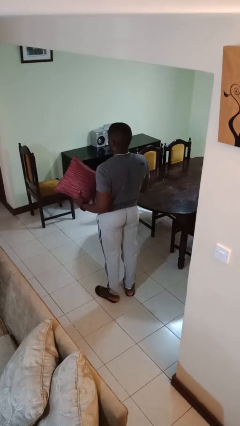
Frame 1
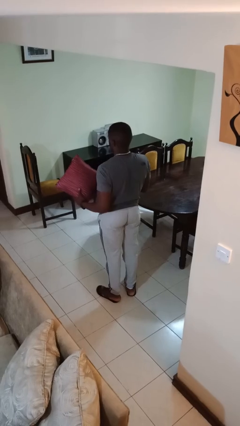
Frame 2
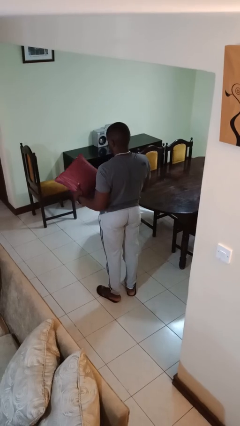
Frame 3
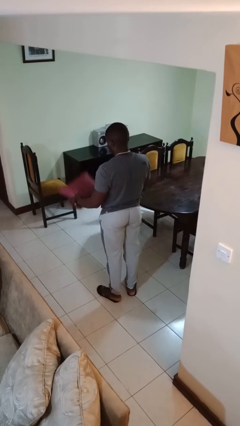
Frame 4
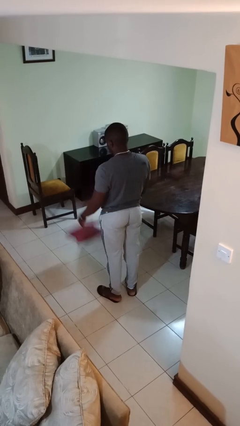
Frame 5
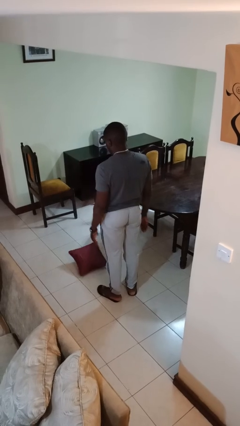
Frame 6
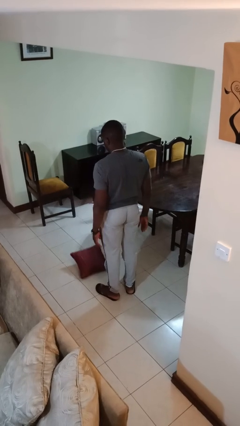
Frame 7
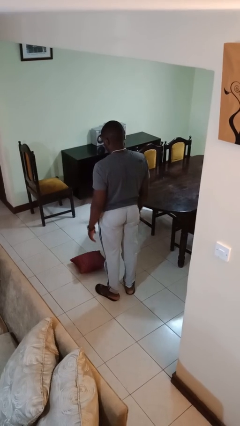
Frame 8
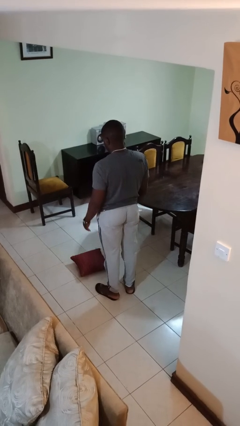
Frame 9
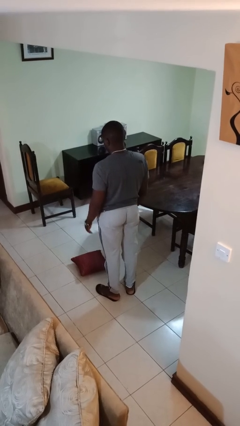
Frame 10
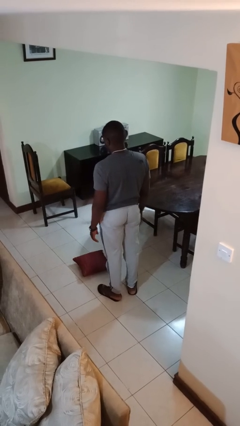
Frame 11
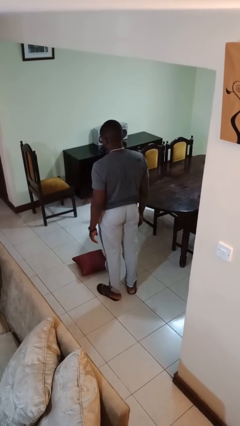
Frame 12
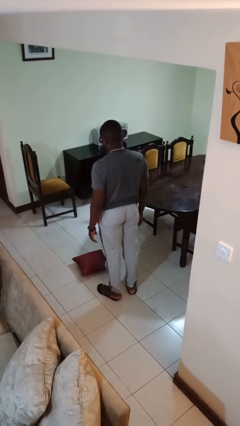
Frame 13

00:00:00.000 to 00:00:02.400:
person throws object to ground

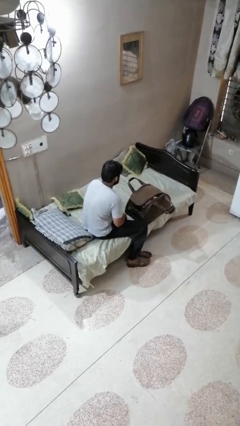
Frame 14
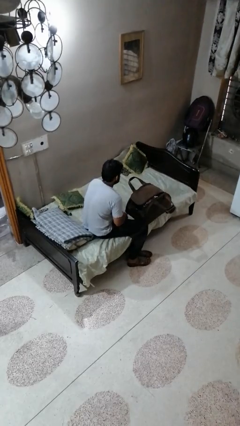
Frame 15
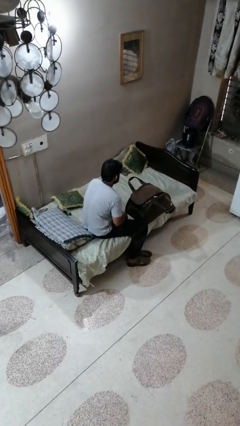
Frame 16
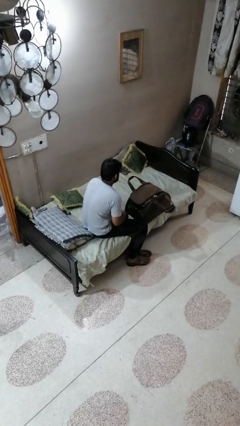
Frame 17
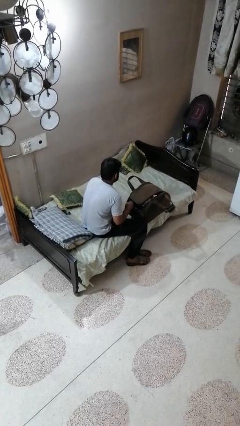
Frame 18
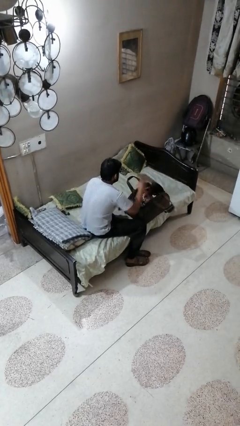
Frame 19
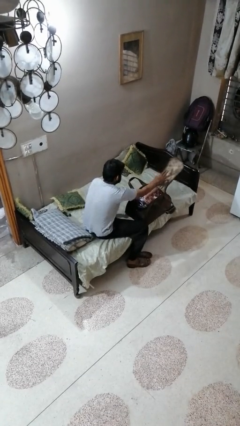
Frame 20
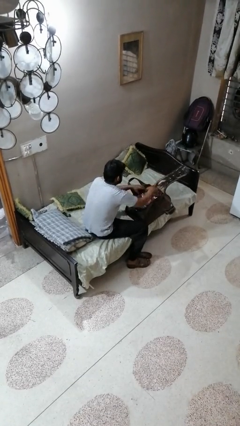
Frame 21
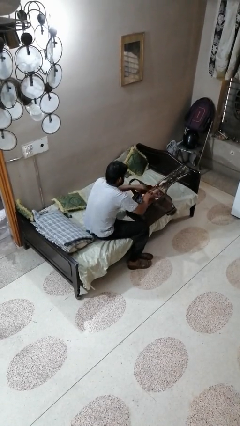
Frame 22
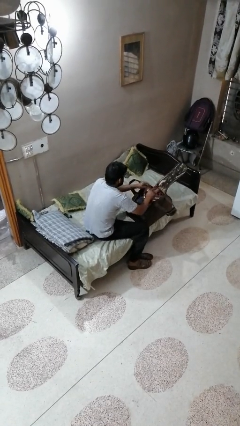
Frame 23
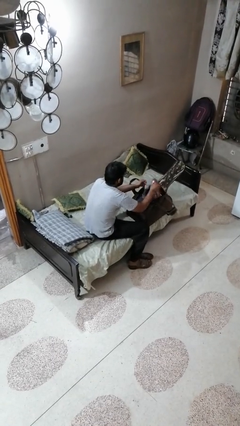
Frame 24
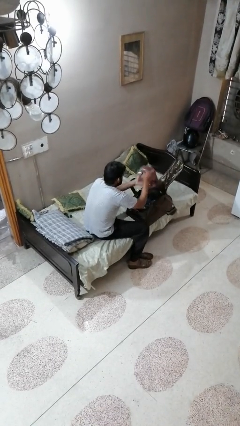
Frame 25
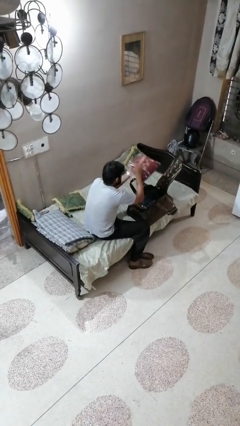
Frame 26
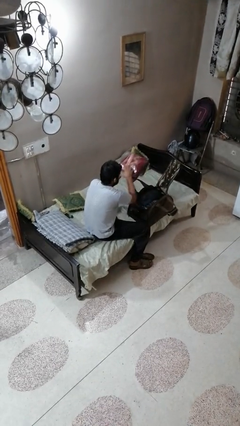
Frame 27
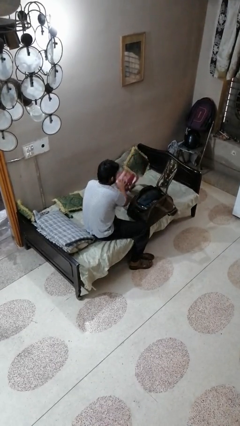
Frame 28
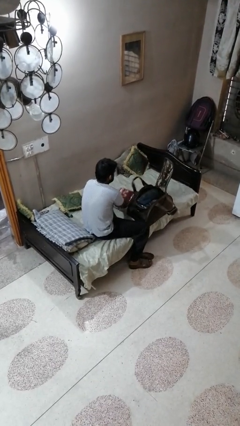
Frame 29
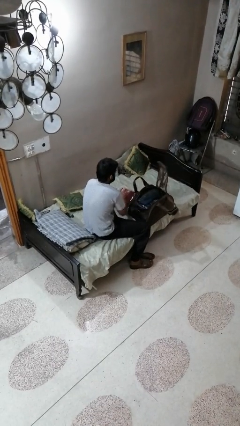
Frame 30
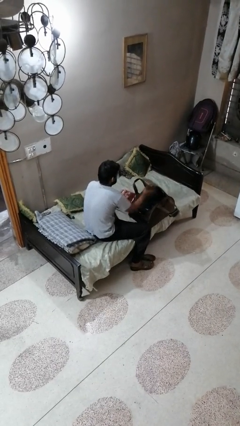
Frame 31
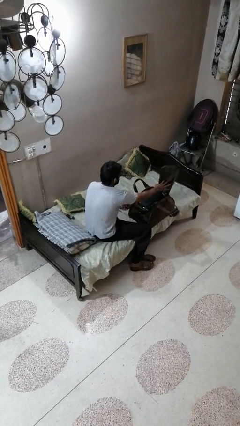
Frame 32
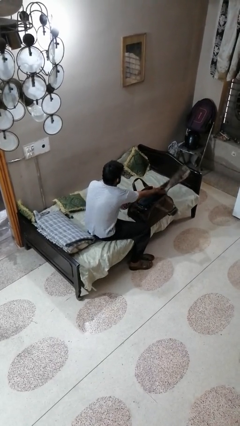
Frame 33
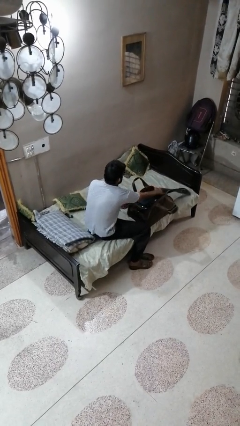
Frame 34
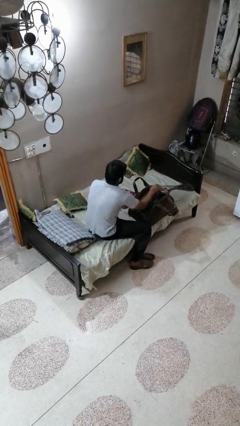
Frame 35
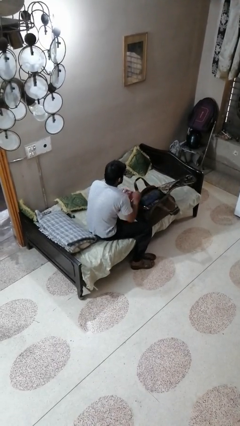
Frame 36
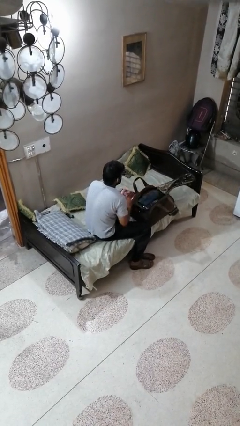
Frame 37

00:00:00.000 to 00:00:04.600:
person unloads clothes from suitcase

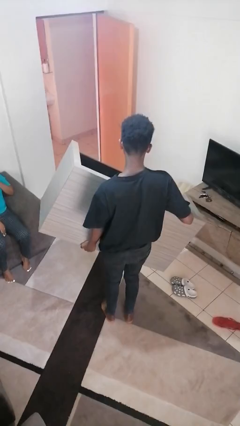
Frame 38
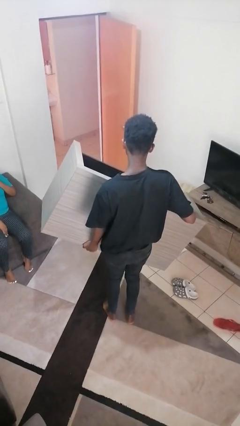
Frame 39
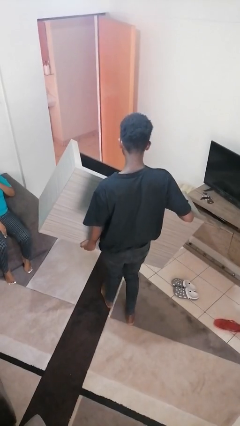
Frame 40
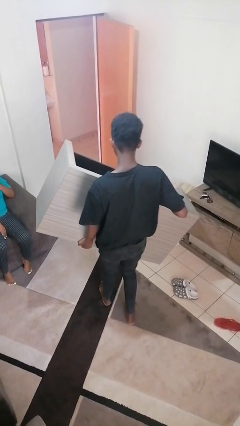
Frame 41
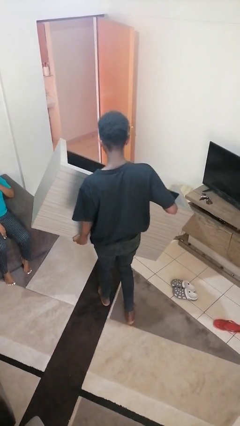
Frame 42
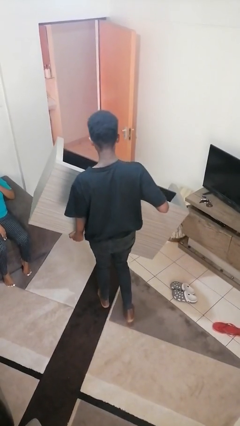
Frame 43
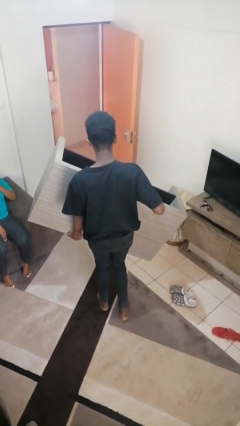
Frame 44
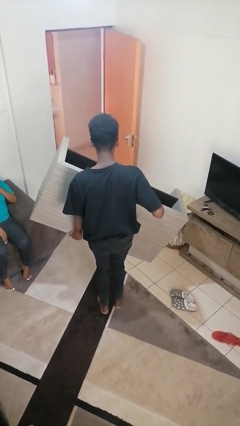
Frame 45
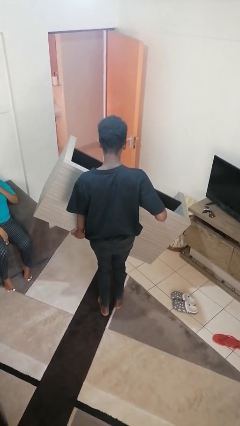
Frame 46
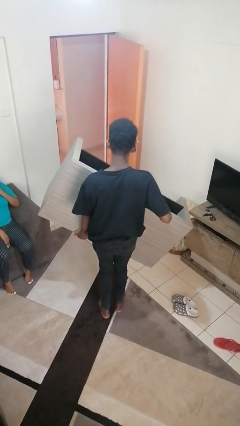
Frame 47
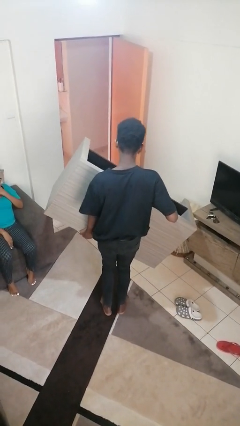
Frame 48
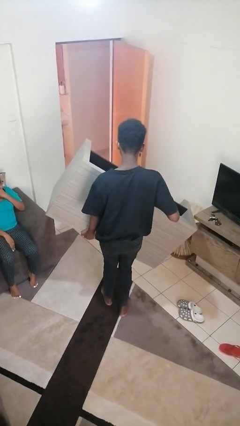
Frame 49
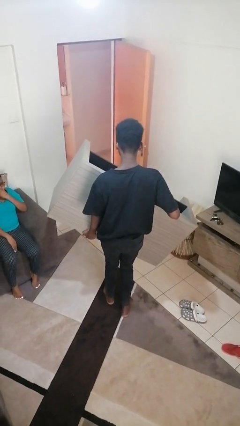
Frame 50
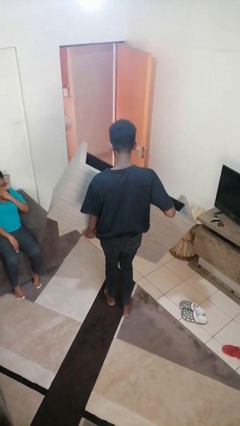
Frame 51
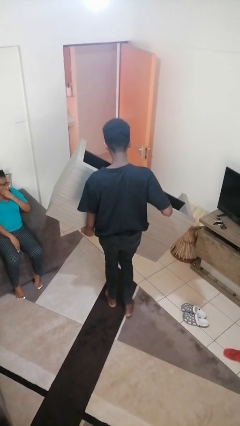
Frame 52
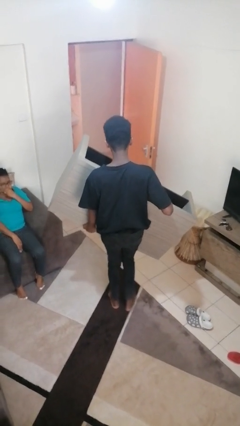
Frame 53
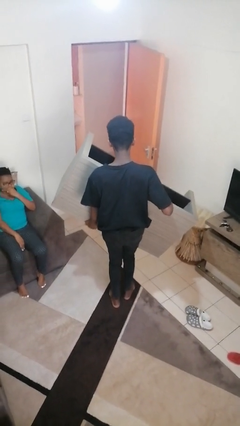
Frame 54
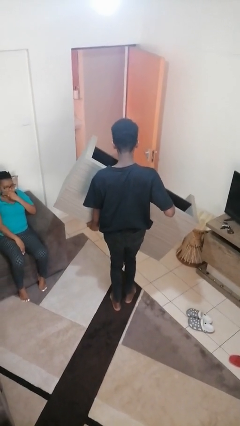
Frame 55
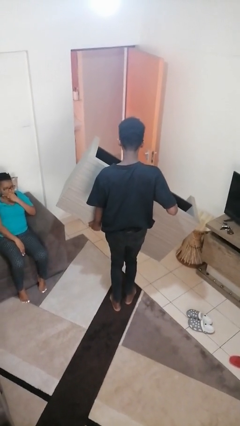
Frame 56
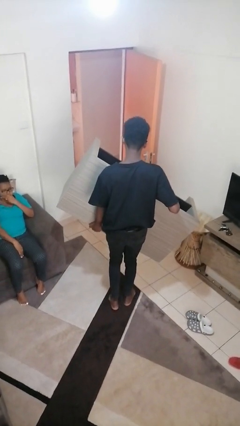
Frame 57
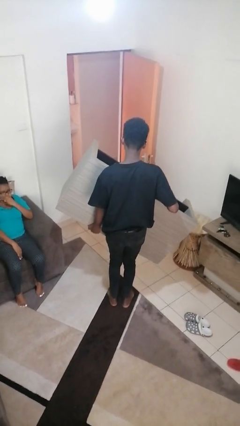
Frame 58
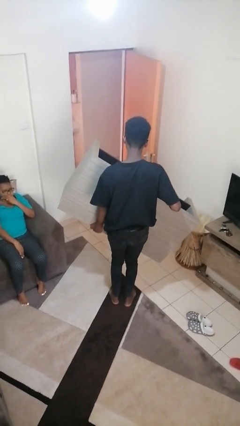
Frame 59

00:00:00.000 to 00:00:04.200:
person carries furniture

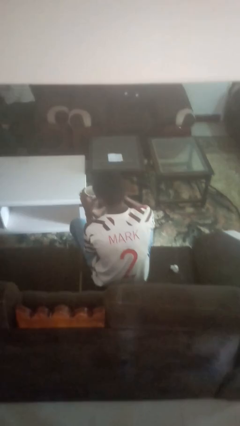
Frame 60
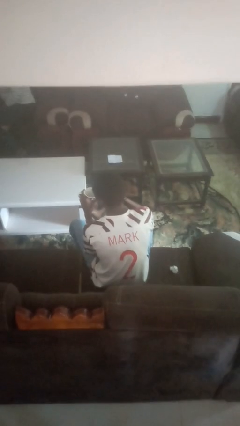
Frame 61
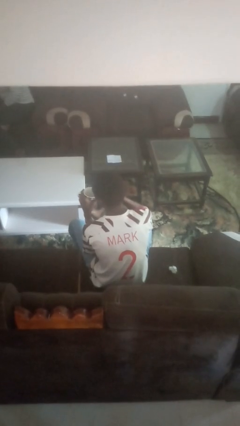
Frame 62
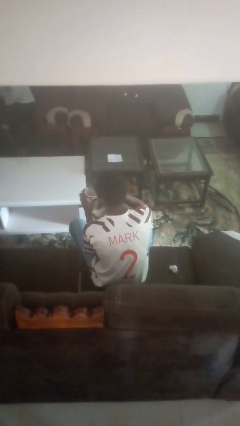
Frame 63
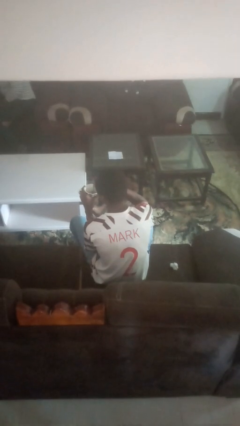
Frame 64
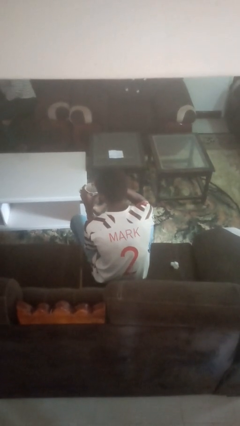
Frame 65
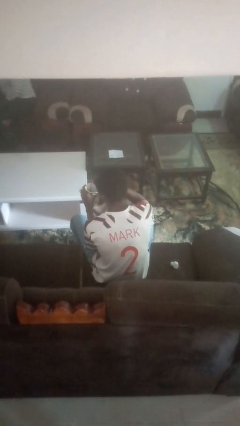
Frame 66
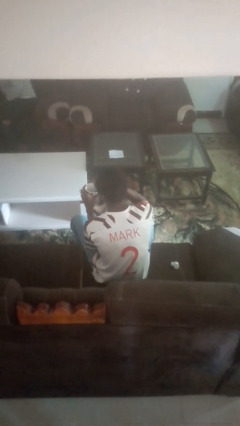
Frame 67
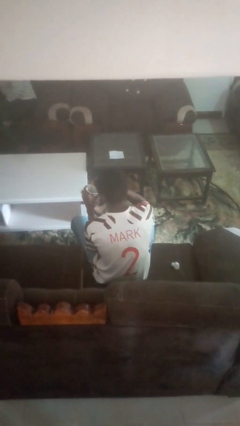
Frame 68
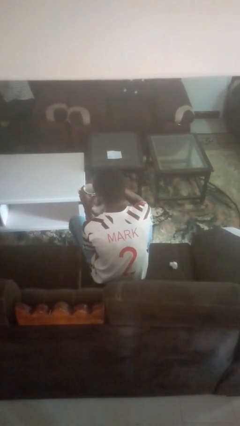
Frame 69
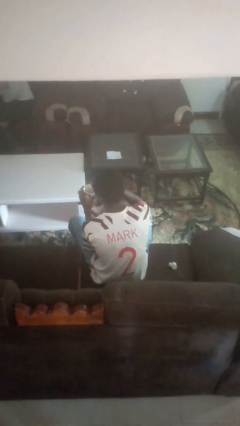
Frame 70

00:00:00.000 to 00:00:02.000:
person stirs mug

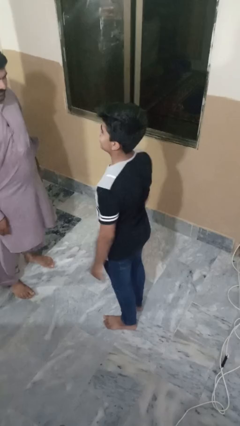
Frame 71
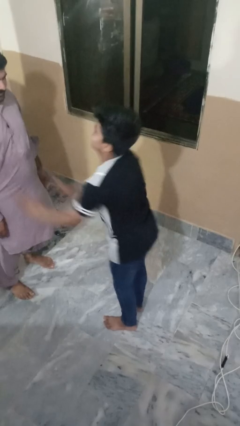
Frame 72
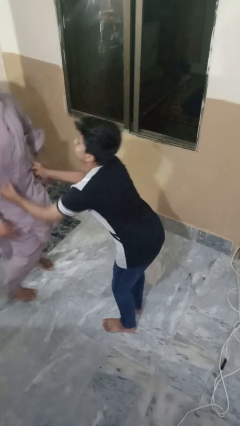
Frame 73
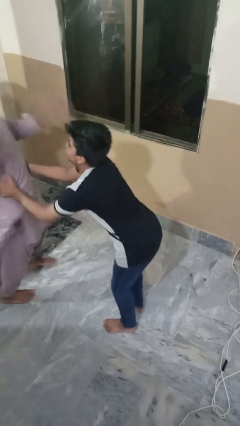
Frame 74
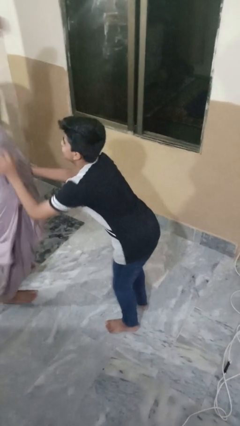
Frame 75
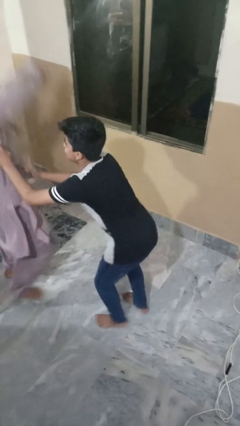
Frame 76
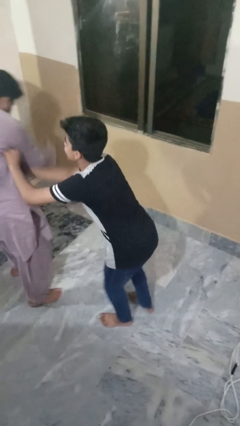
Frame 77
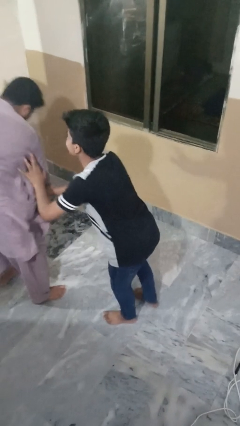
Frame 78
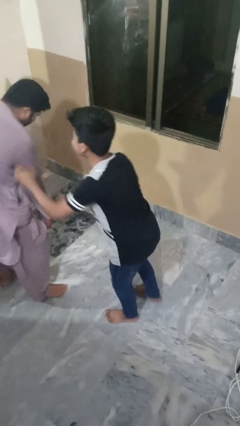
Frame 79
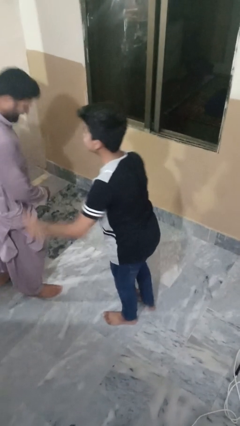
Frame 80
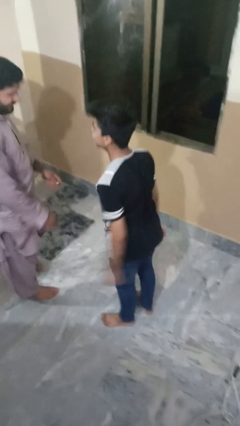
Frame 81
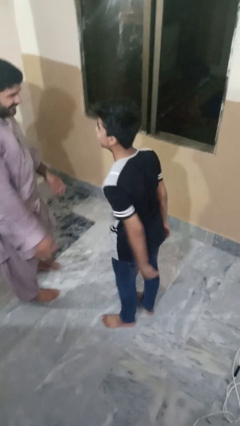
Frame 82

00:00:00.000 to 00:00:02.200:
person tickles person

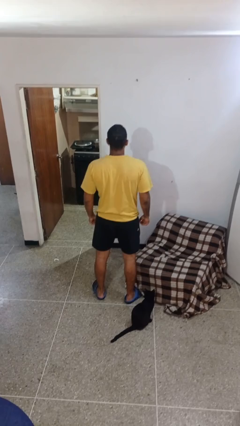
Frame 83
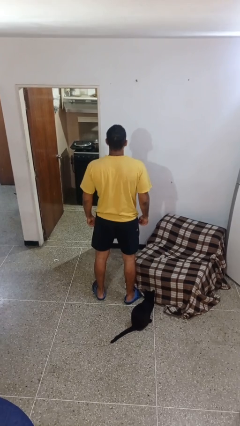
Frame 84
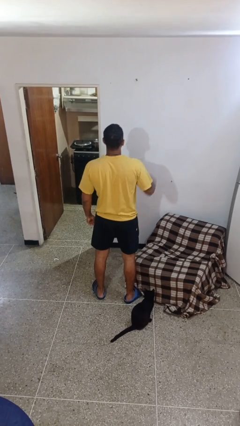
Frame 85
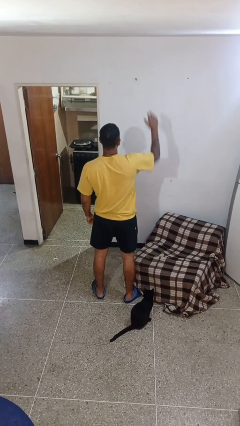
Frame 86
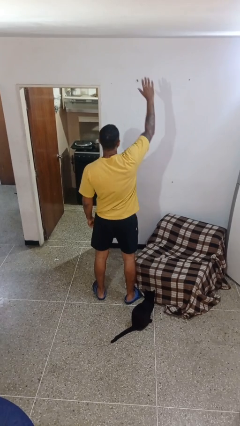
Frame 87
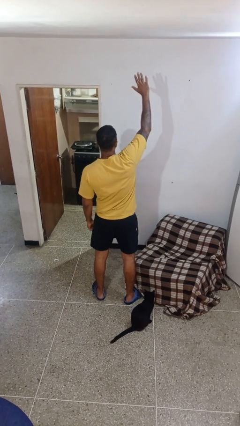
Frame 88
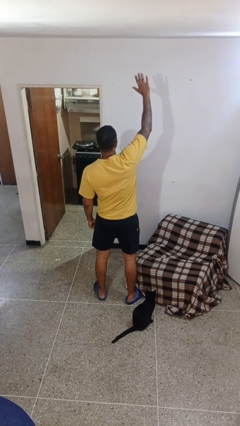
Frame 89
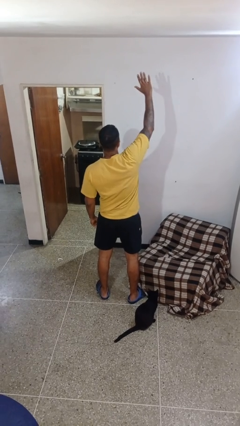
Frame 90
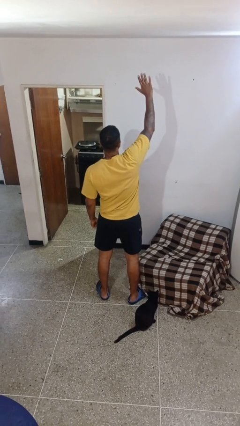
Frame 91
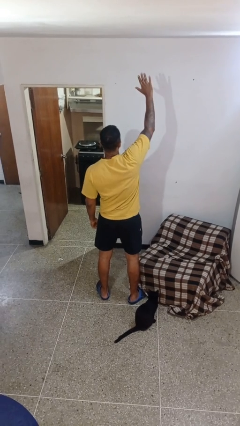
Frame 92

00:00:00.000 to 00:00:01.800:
person gestures raise hand
